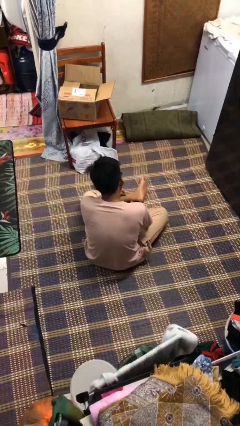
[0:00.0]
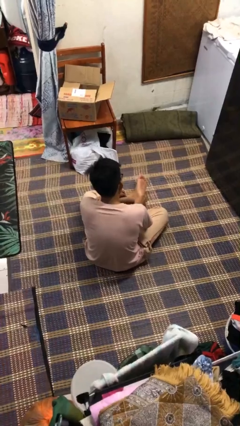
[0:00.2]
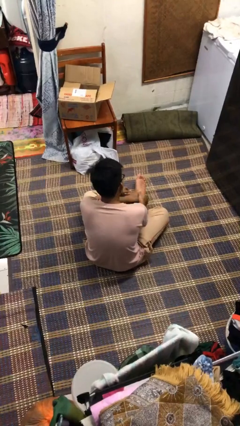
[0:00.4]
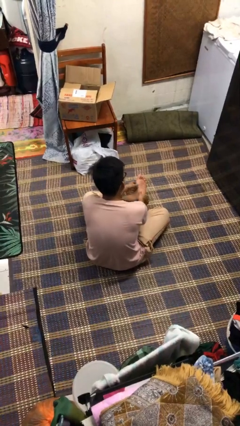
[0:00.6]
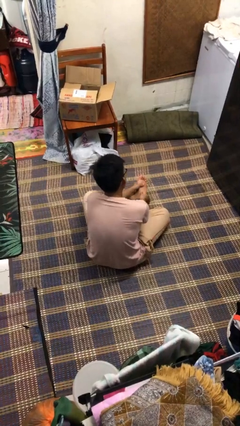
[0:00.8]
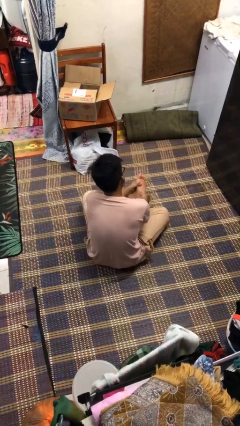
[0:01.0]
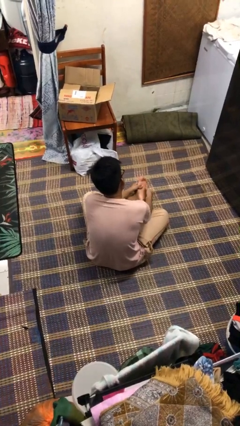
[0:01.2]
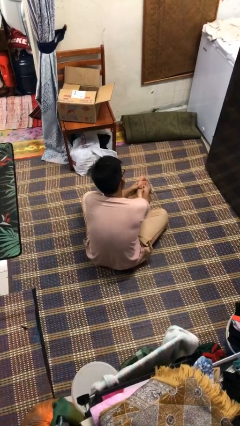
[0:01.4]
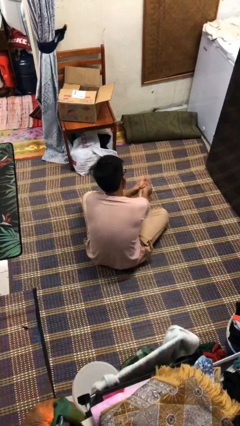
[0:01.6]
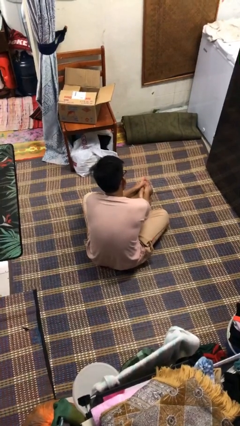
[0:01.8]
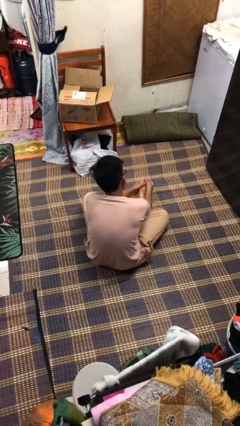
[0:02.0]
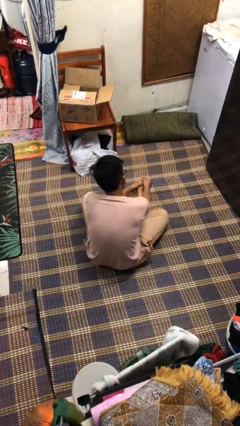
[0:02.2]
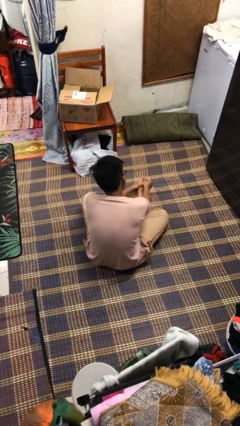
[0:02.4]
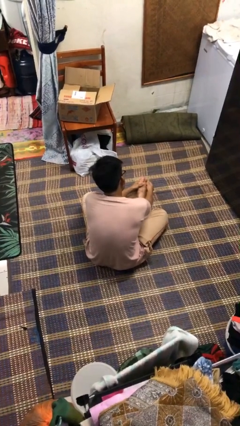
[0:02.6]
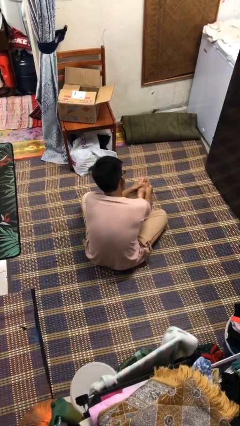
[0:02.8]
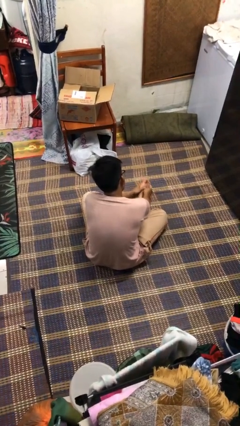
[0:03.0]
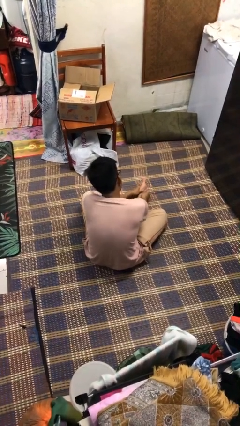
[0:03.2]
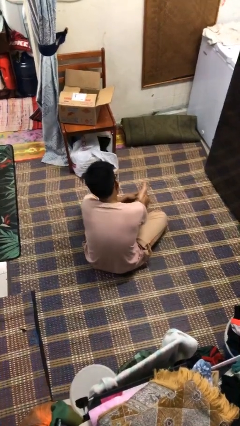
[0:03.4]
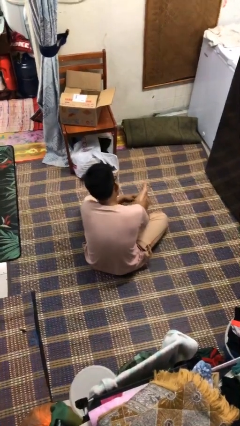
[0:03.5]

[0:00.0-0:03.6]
person rubs foot

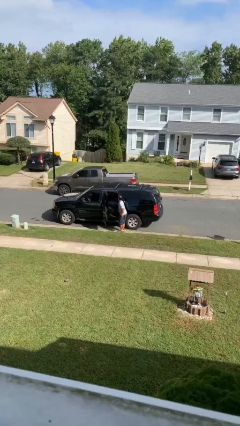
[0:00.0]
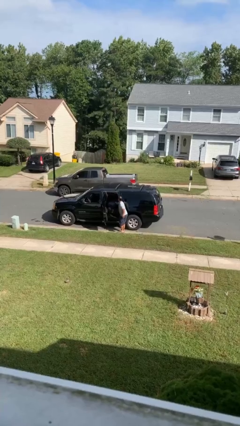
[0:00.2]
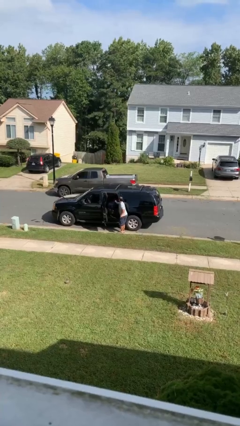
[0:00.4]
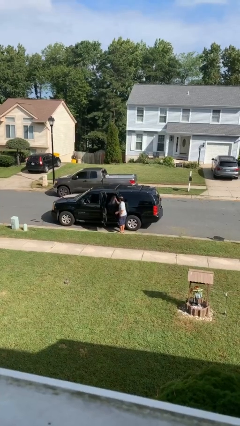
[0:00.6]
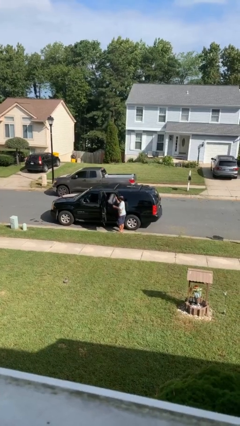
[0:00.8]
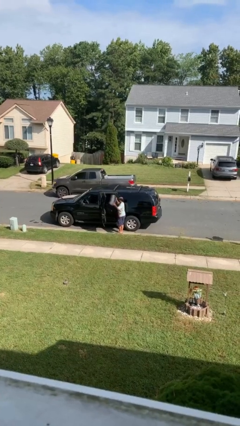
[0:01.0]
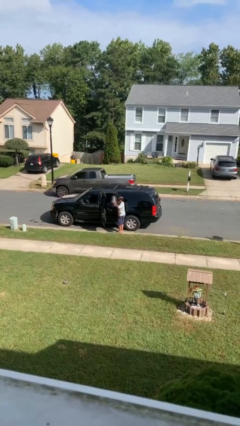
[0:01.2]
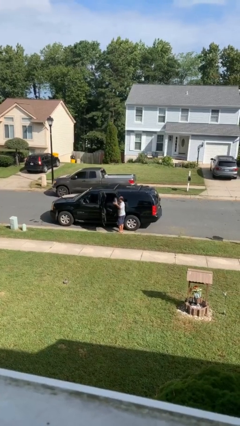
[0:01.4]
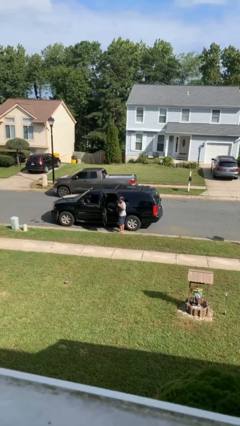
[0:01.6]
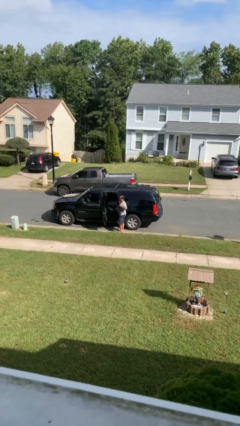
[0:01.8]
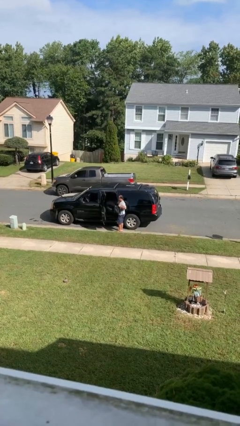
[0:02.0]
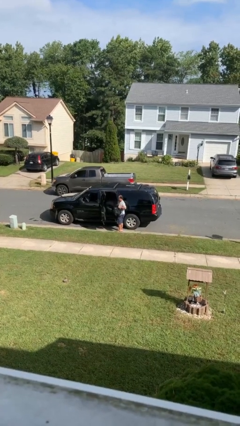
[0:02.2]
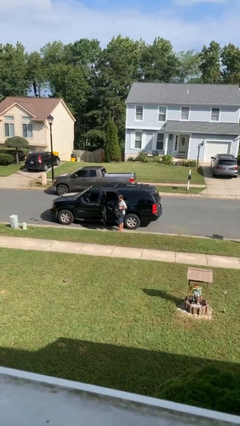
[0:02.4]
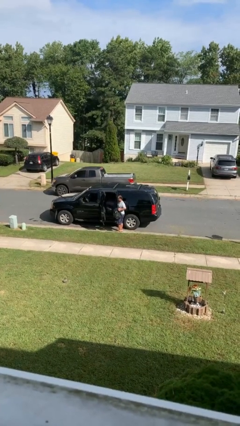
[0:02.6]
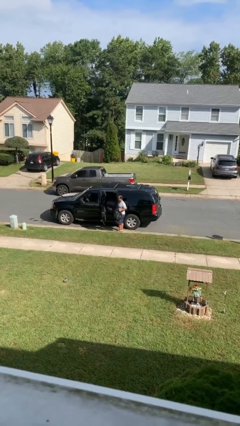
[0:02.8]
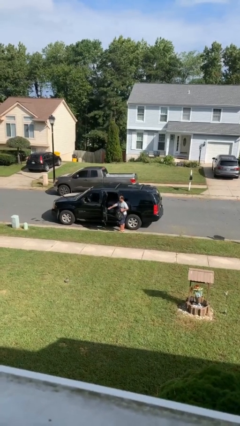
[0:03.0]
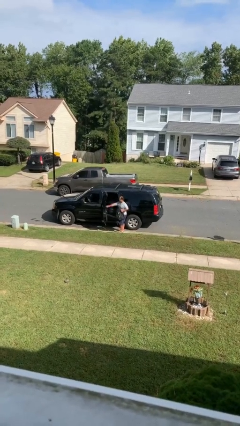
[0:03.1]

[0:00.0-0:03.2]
person unloads car

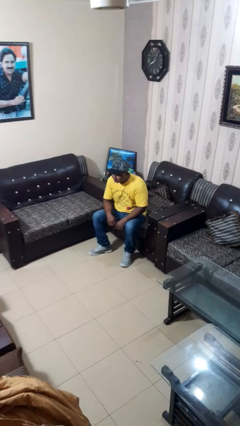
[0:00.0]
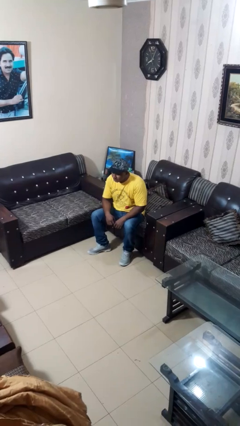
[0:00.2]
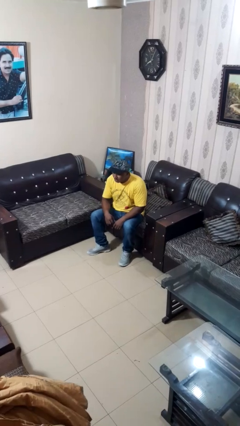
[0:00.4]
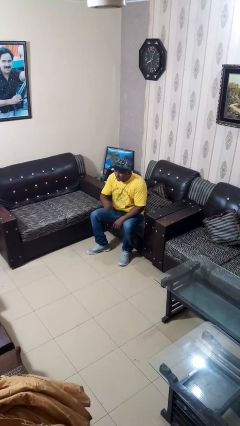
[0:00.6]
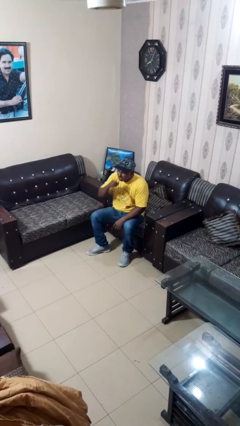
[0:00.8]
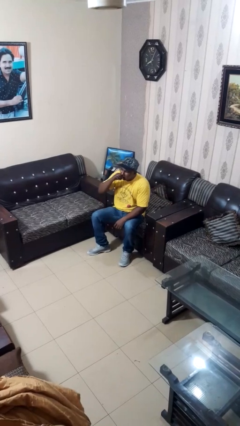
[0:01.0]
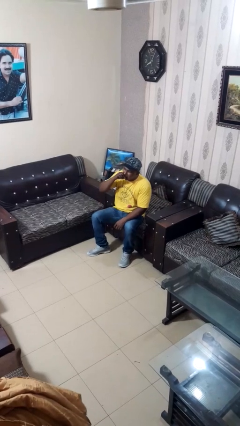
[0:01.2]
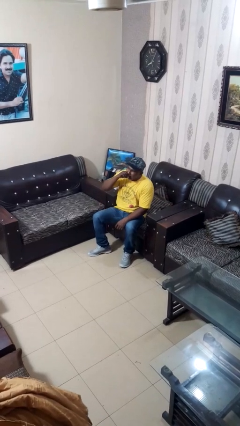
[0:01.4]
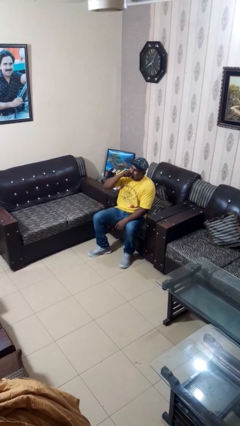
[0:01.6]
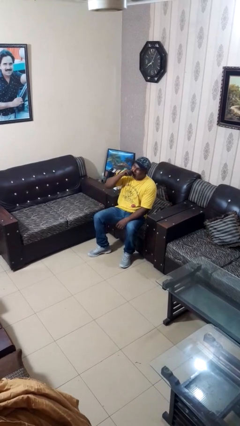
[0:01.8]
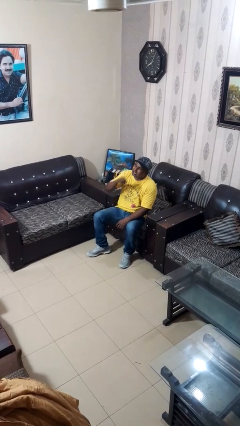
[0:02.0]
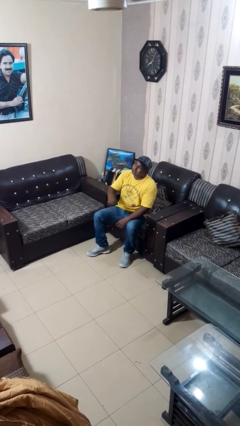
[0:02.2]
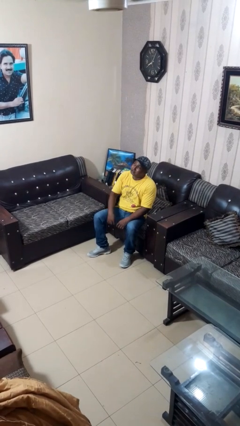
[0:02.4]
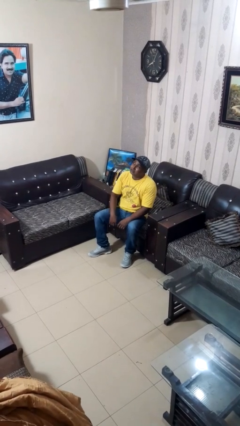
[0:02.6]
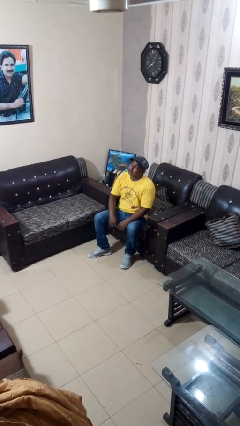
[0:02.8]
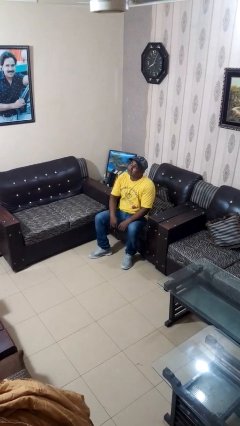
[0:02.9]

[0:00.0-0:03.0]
person yawns

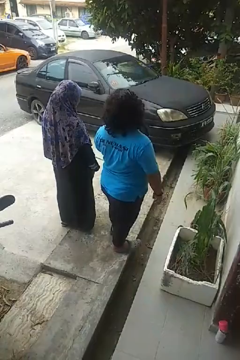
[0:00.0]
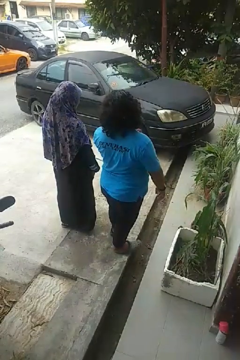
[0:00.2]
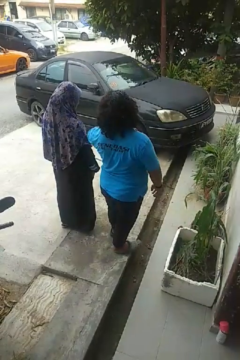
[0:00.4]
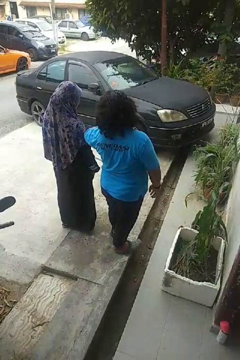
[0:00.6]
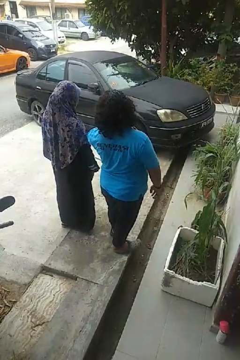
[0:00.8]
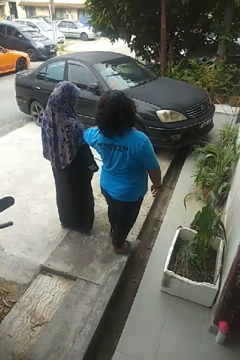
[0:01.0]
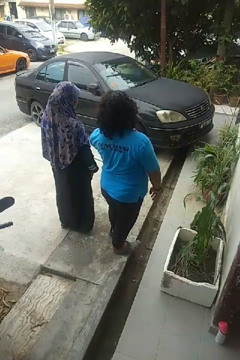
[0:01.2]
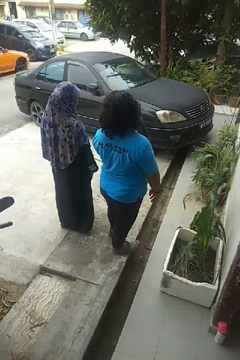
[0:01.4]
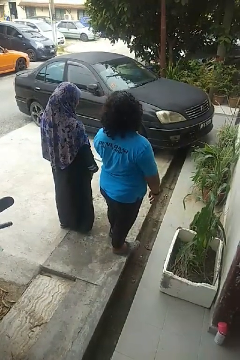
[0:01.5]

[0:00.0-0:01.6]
person nudges person with elbow

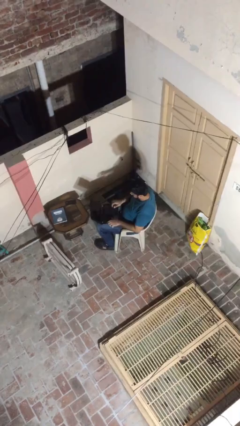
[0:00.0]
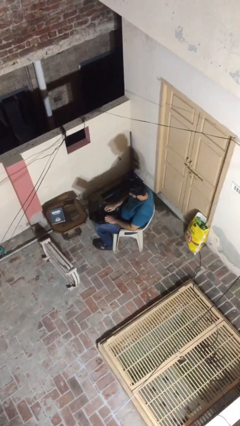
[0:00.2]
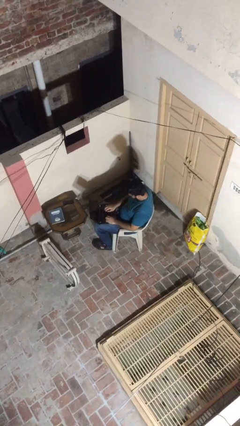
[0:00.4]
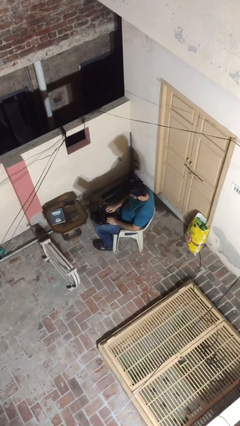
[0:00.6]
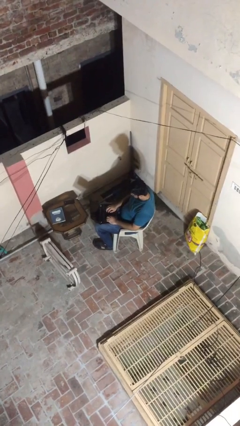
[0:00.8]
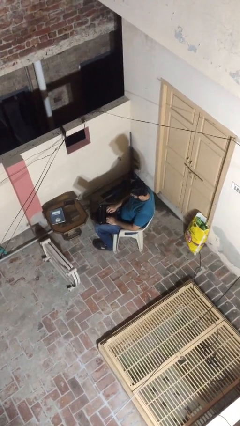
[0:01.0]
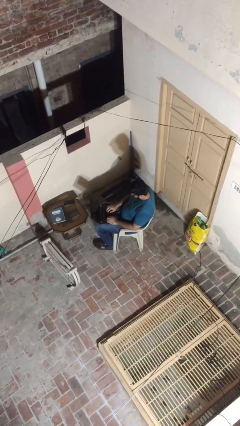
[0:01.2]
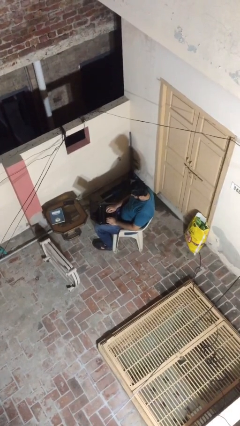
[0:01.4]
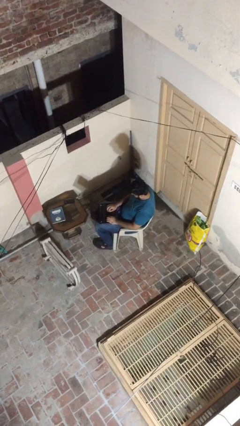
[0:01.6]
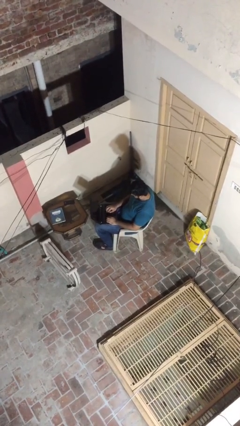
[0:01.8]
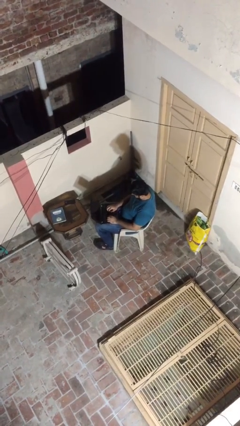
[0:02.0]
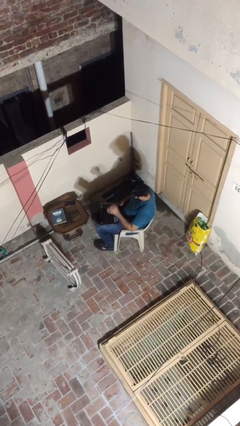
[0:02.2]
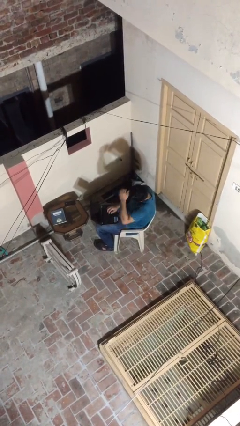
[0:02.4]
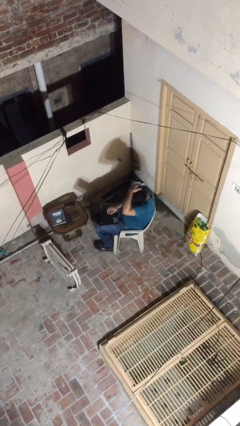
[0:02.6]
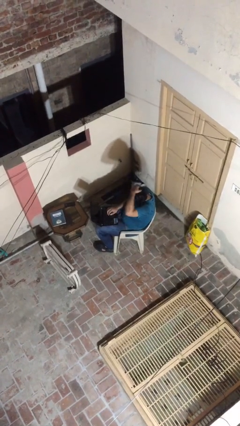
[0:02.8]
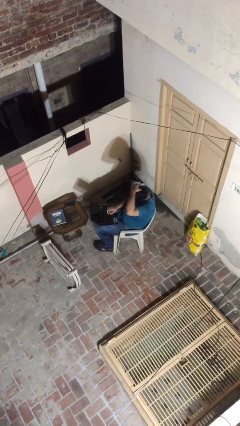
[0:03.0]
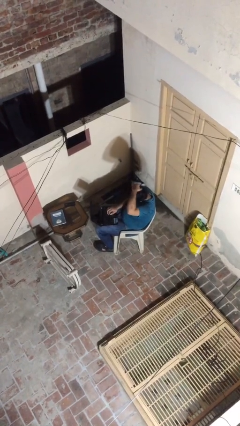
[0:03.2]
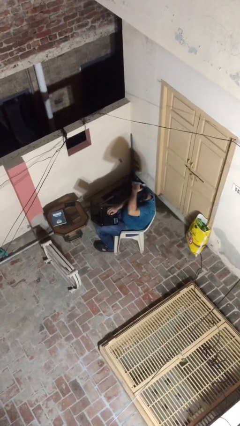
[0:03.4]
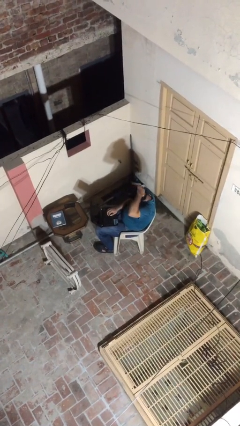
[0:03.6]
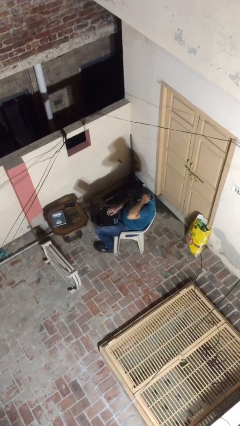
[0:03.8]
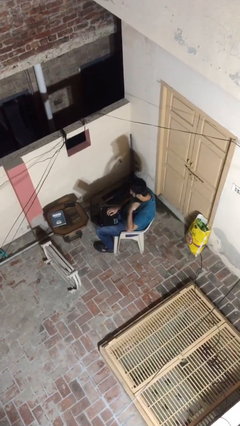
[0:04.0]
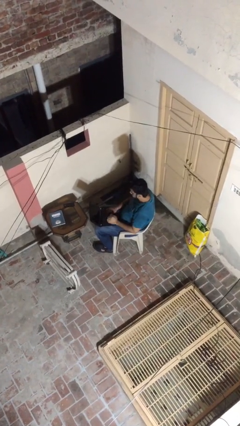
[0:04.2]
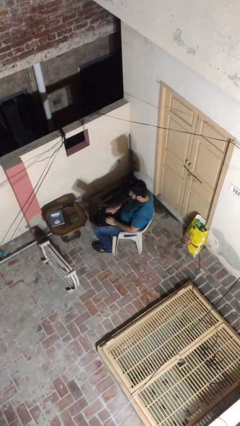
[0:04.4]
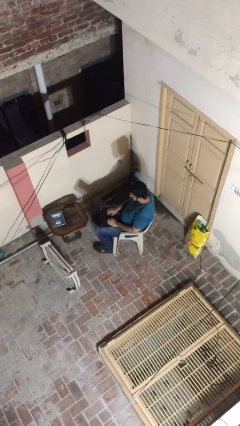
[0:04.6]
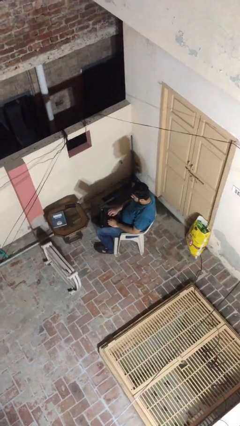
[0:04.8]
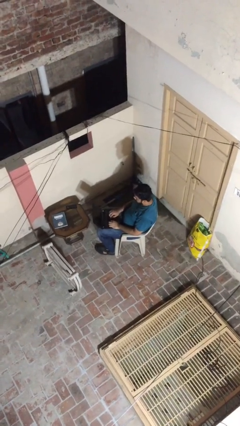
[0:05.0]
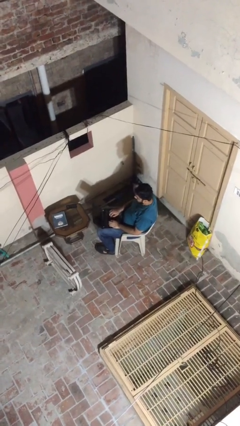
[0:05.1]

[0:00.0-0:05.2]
person interacts with laptop

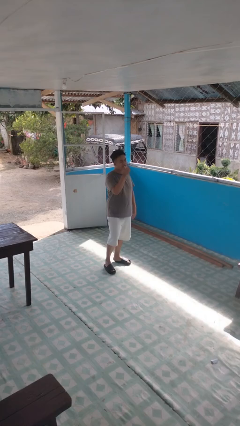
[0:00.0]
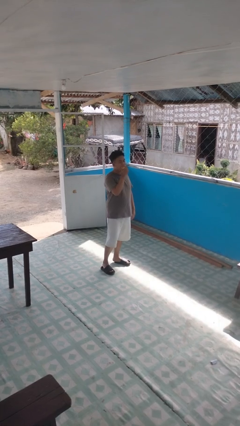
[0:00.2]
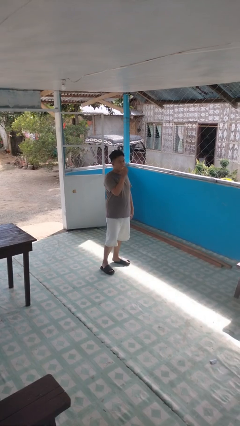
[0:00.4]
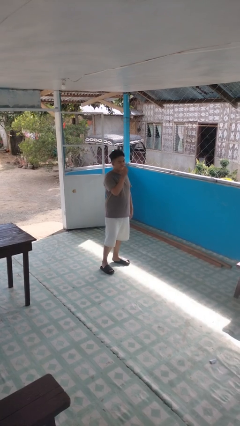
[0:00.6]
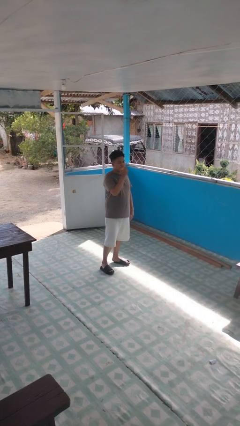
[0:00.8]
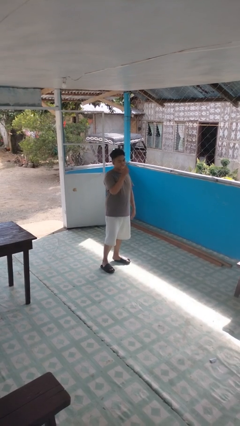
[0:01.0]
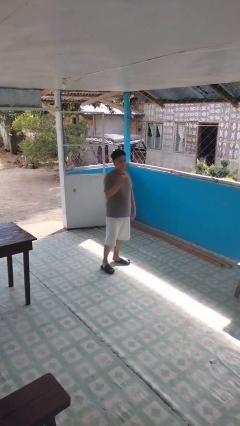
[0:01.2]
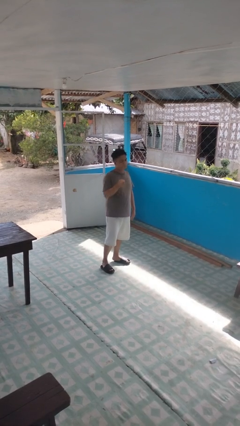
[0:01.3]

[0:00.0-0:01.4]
person eats apple
